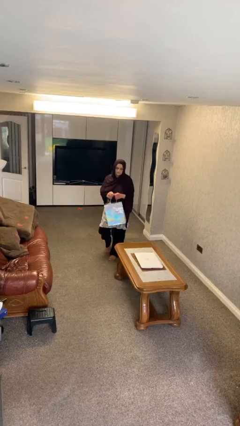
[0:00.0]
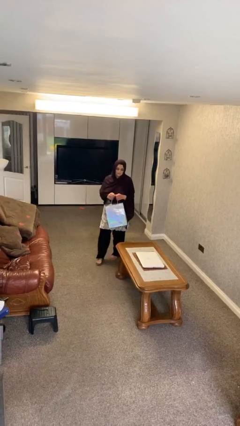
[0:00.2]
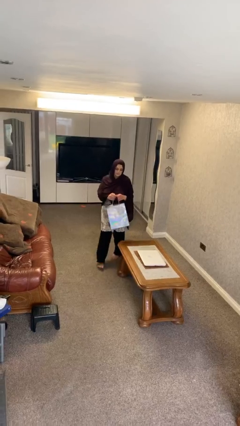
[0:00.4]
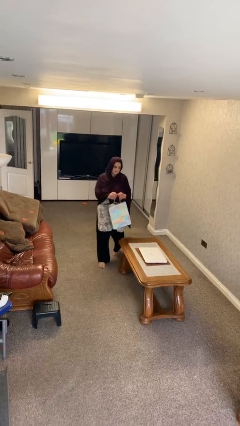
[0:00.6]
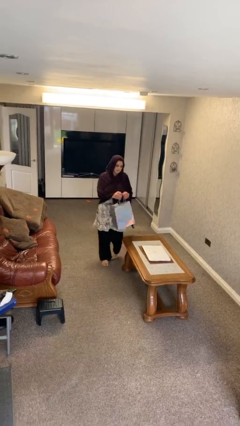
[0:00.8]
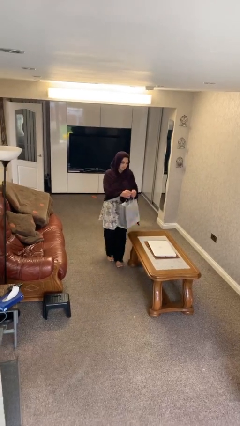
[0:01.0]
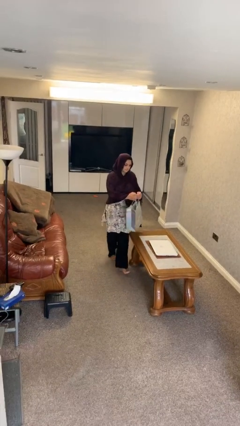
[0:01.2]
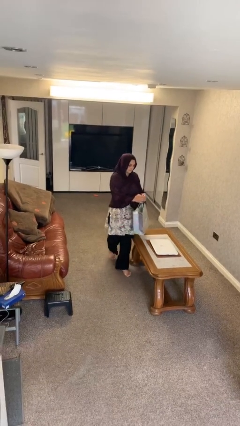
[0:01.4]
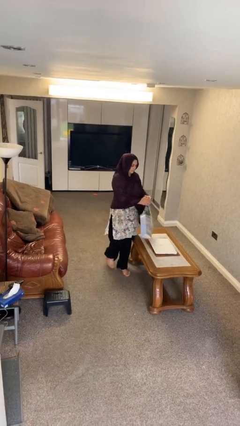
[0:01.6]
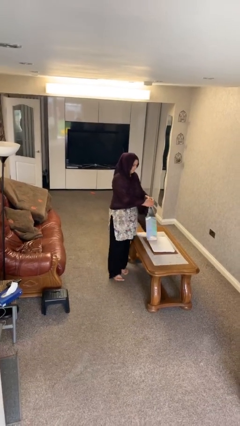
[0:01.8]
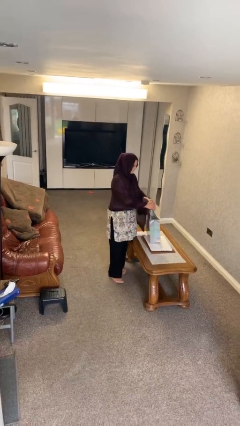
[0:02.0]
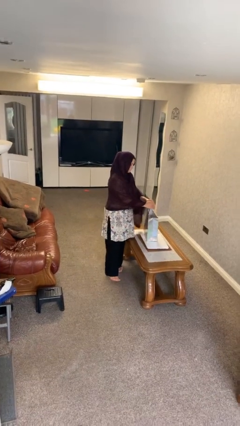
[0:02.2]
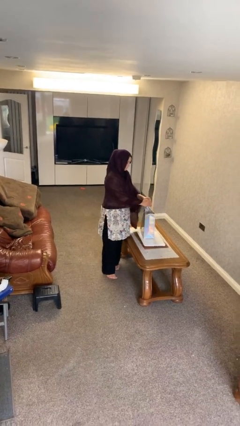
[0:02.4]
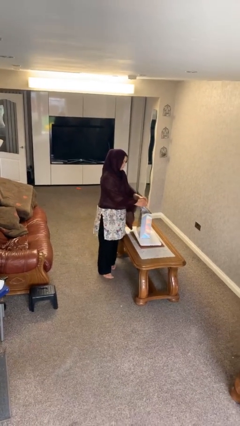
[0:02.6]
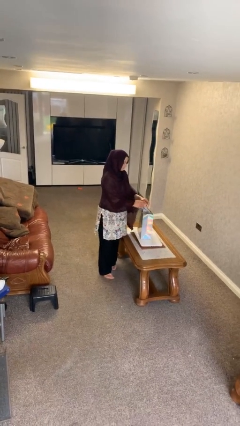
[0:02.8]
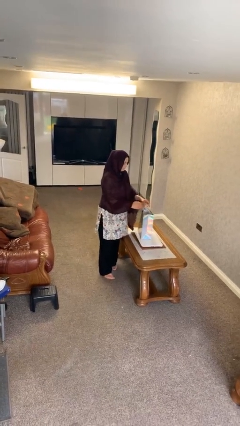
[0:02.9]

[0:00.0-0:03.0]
person puts down object on table

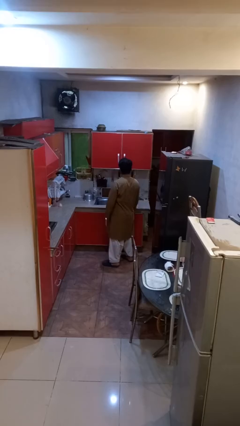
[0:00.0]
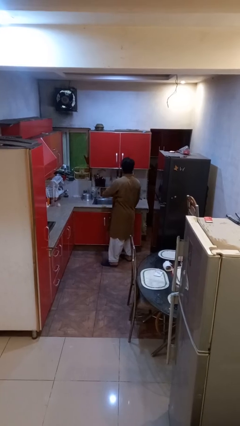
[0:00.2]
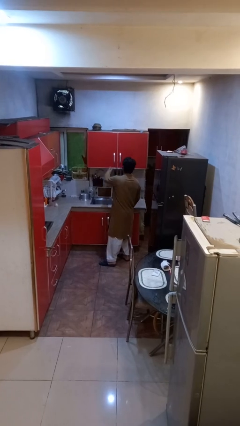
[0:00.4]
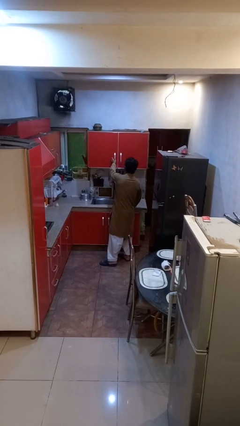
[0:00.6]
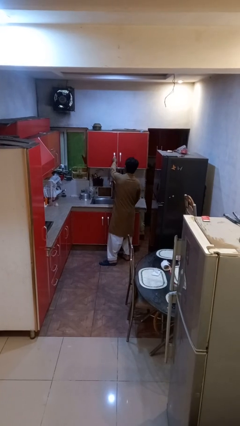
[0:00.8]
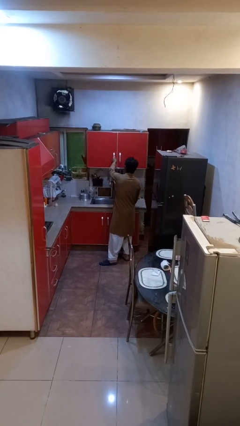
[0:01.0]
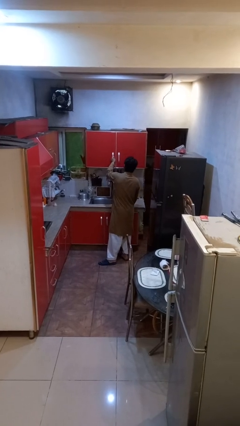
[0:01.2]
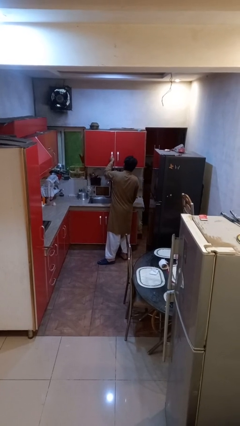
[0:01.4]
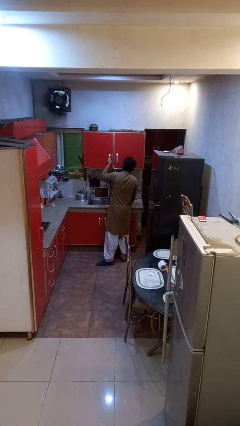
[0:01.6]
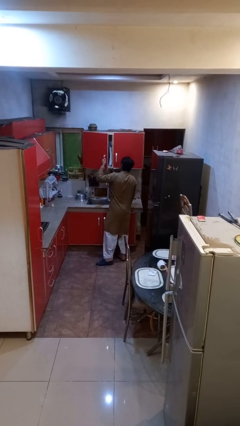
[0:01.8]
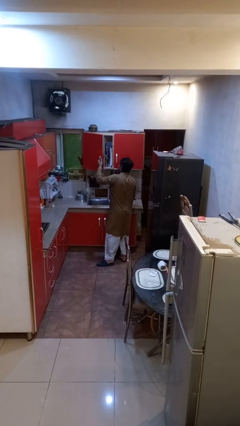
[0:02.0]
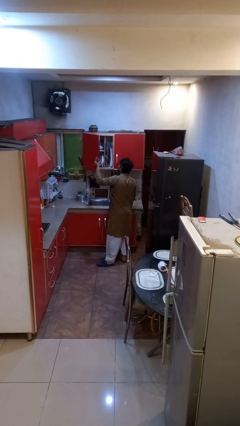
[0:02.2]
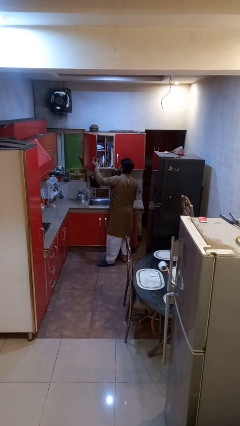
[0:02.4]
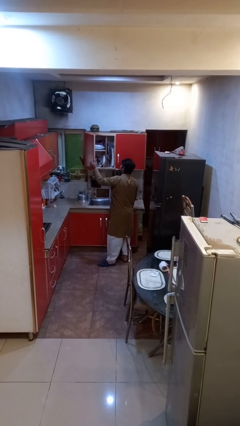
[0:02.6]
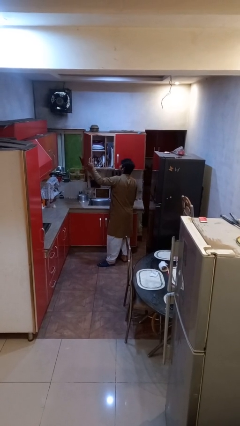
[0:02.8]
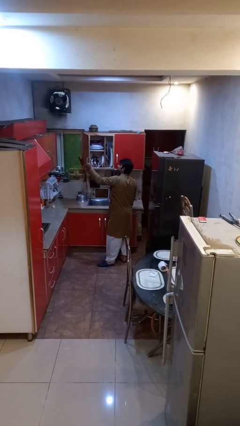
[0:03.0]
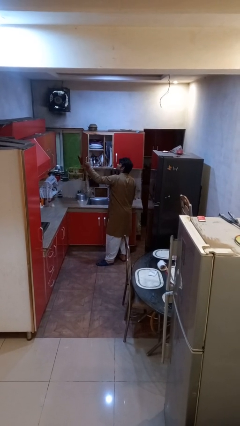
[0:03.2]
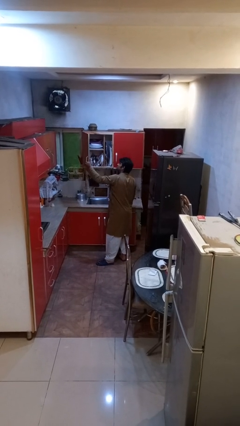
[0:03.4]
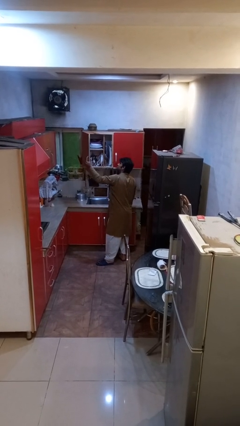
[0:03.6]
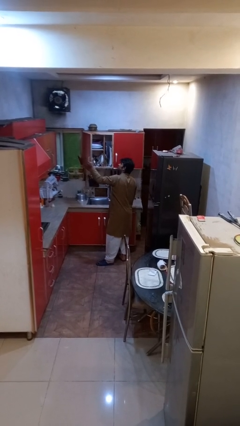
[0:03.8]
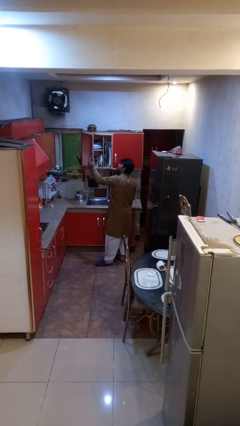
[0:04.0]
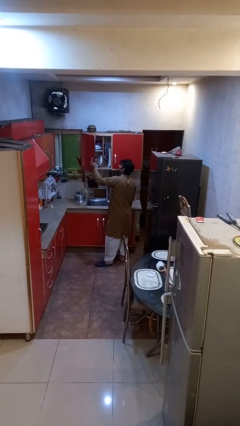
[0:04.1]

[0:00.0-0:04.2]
person opens cabinet

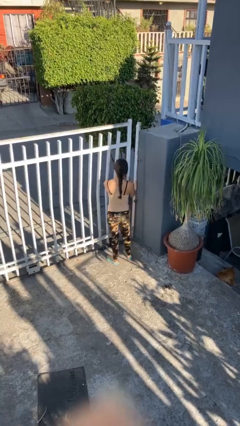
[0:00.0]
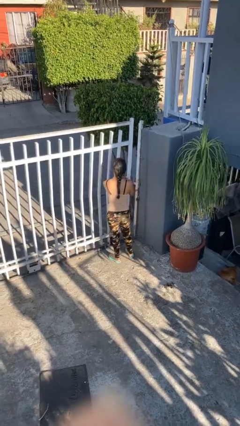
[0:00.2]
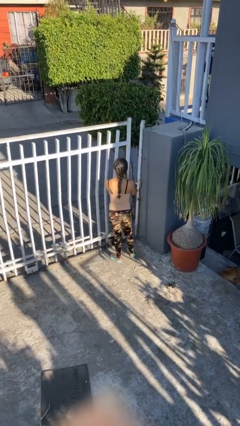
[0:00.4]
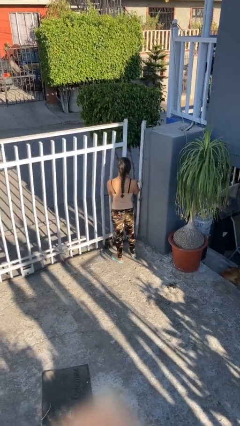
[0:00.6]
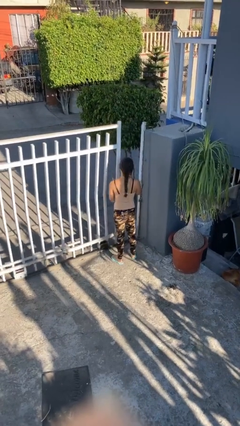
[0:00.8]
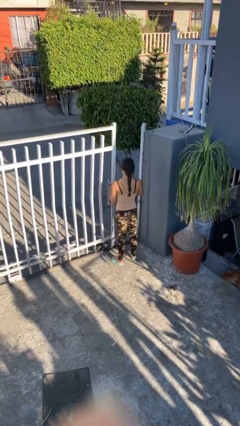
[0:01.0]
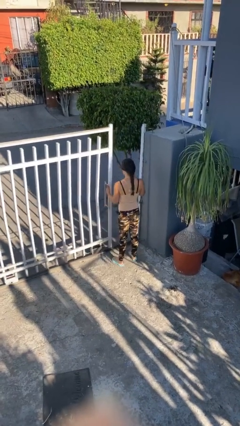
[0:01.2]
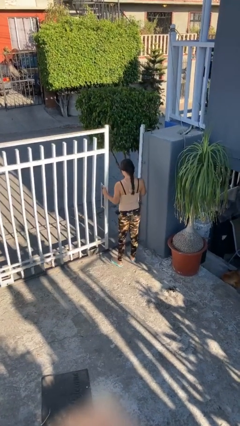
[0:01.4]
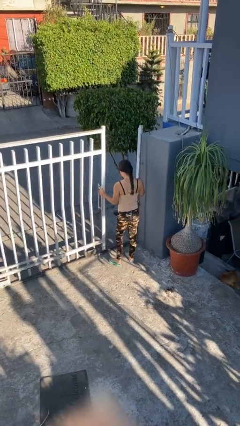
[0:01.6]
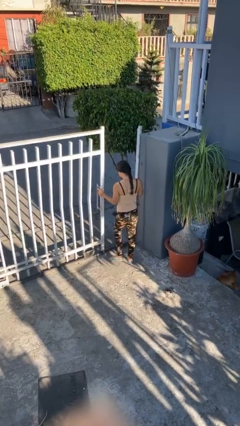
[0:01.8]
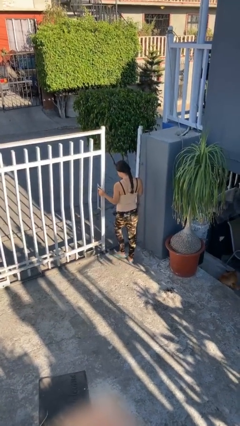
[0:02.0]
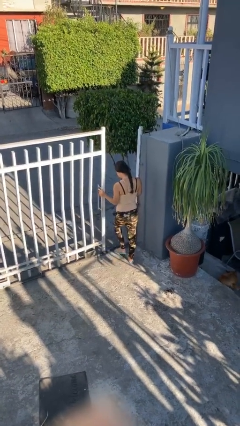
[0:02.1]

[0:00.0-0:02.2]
person opens facility door

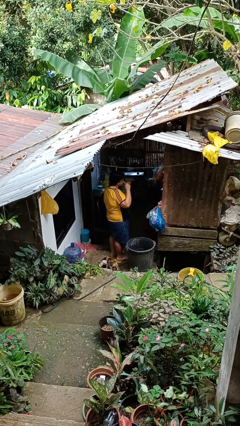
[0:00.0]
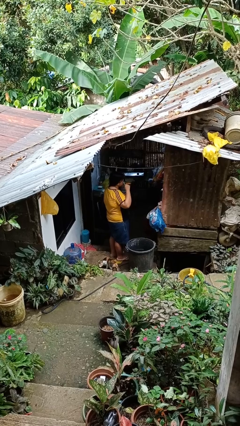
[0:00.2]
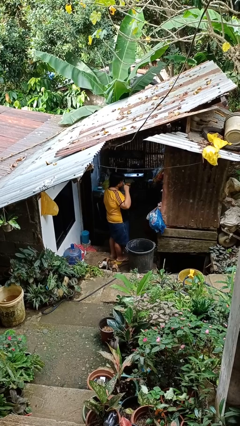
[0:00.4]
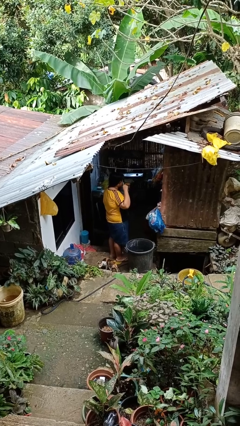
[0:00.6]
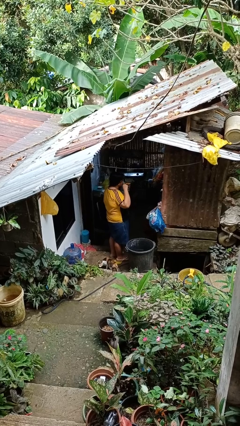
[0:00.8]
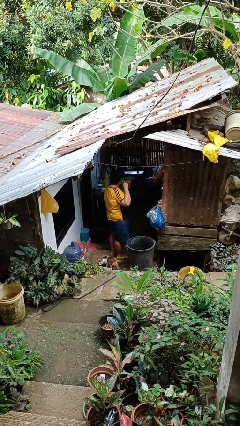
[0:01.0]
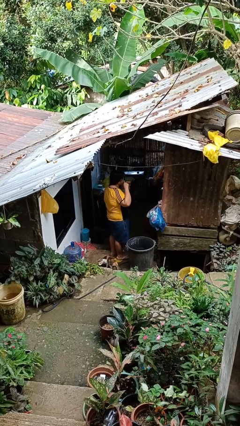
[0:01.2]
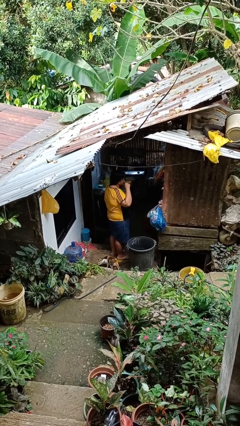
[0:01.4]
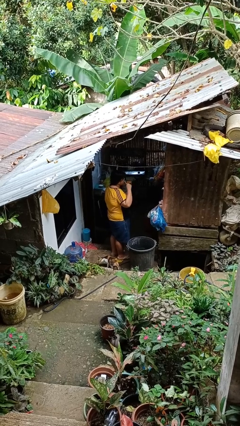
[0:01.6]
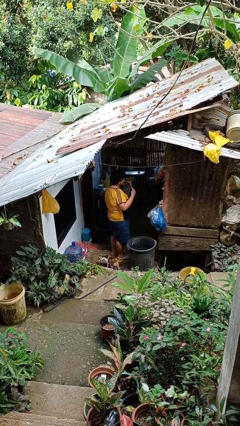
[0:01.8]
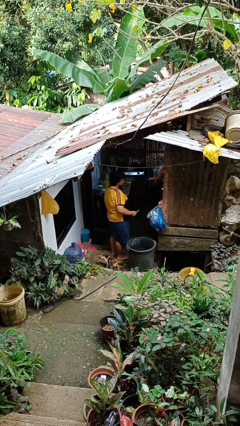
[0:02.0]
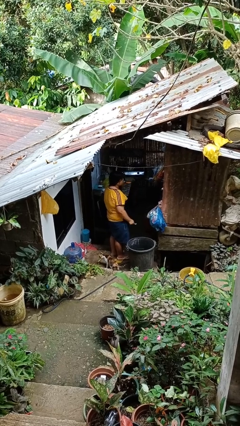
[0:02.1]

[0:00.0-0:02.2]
person brushes teeth

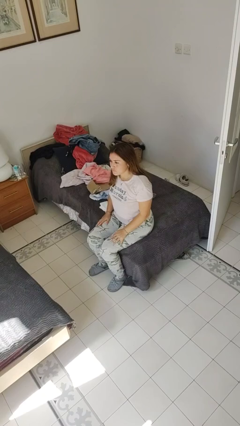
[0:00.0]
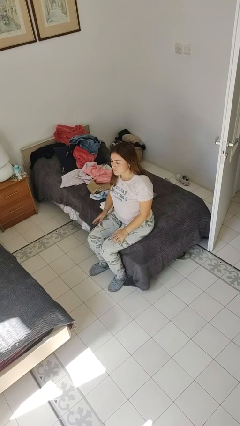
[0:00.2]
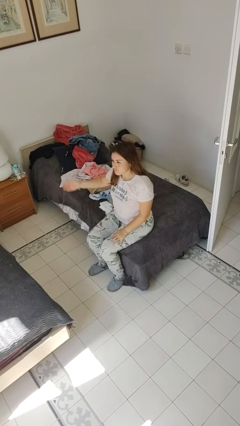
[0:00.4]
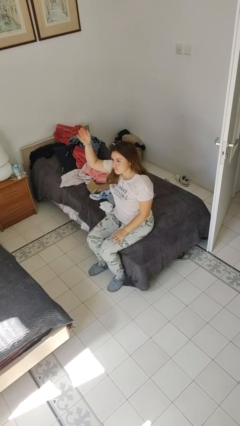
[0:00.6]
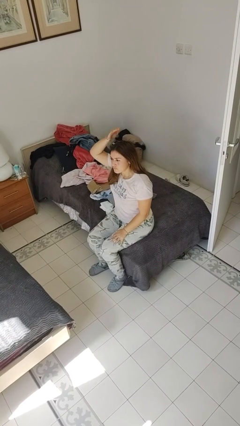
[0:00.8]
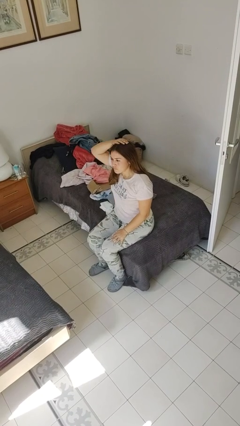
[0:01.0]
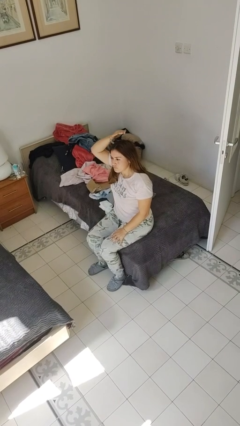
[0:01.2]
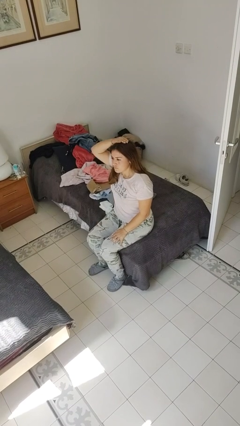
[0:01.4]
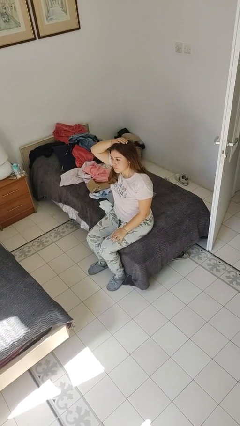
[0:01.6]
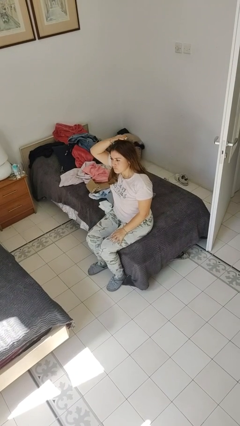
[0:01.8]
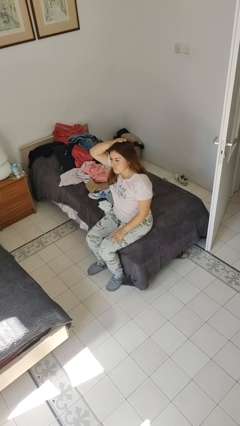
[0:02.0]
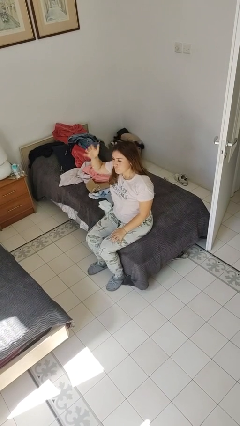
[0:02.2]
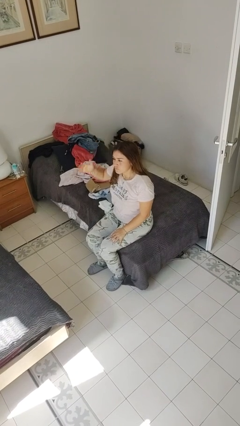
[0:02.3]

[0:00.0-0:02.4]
person pats head

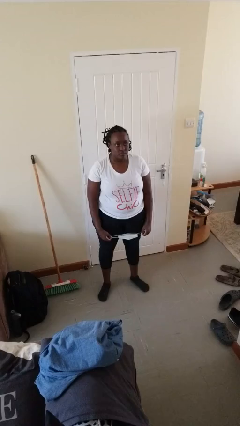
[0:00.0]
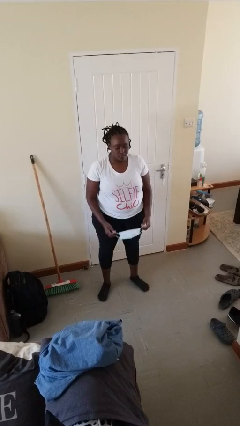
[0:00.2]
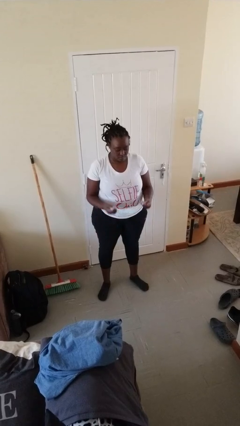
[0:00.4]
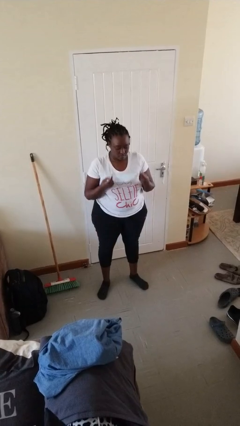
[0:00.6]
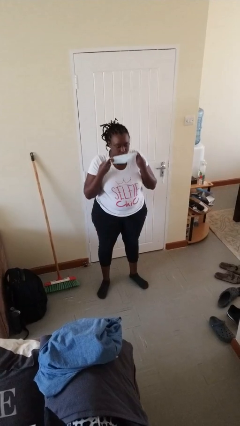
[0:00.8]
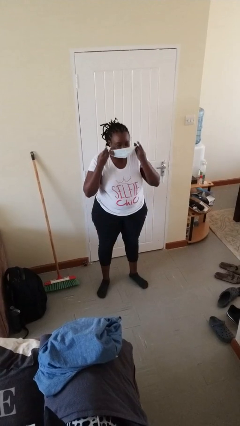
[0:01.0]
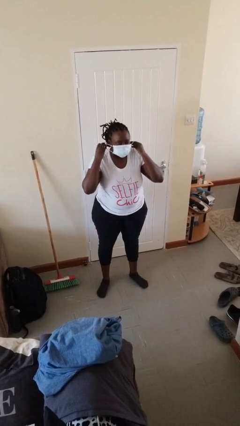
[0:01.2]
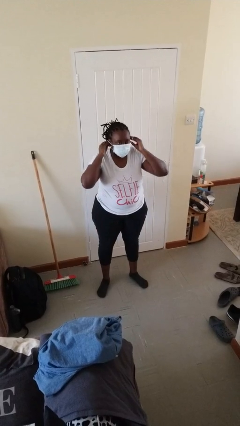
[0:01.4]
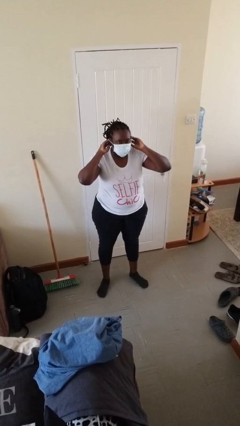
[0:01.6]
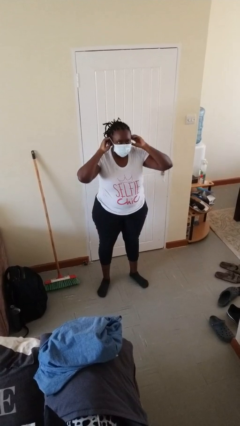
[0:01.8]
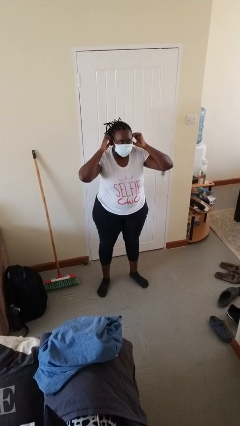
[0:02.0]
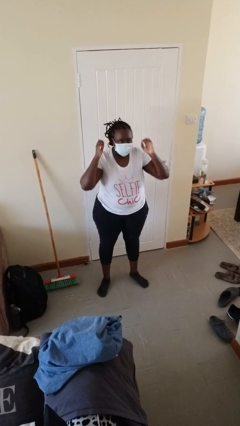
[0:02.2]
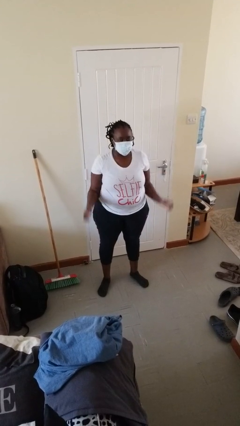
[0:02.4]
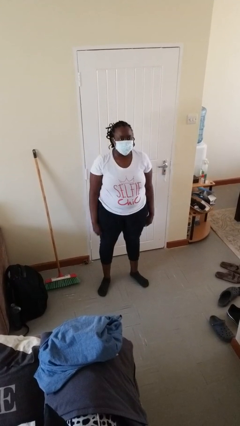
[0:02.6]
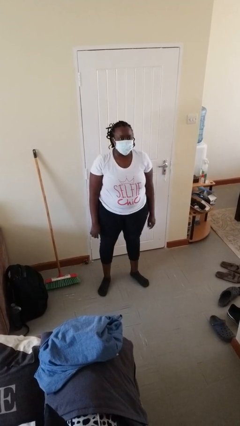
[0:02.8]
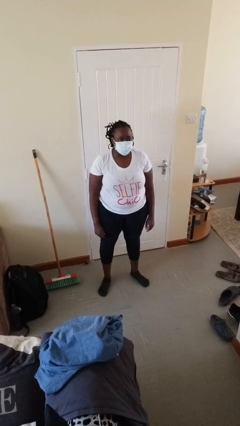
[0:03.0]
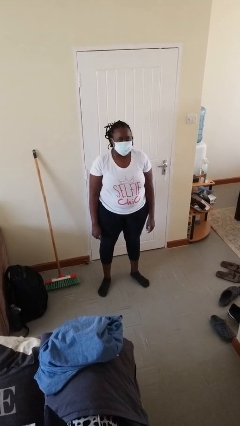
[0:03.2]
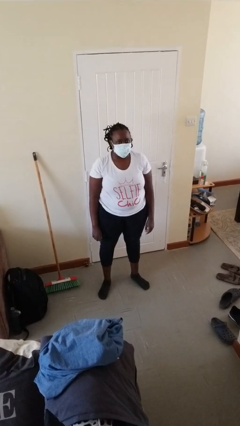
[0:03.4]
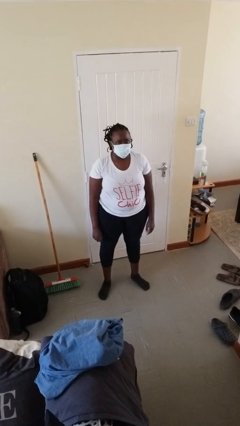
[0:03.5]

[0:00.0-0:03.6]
person puts on facemask
